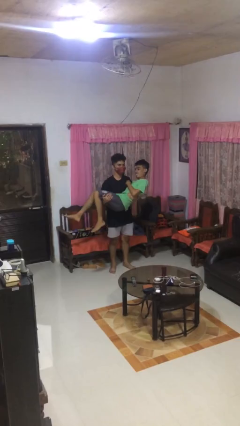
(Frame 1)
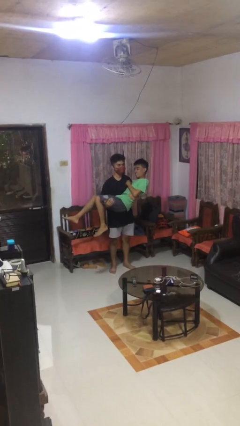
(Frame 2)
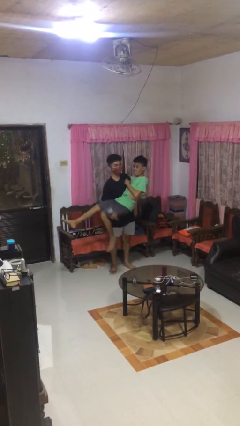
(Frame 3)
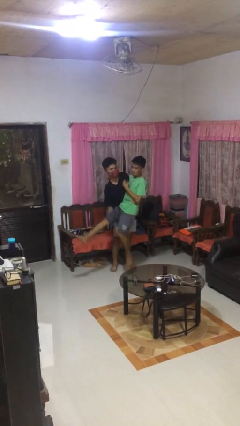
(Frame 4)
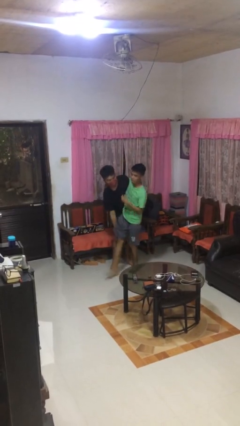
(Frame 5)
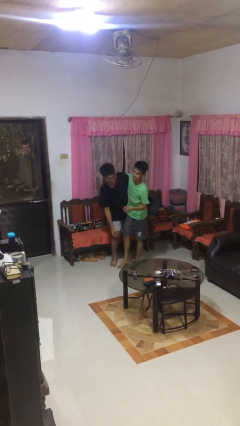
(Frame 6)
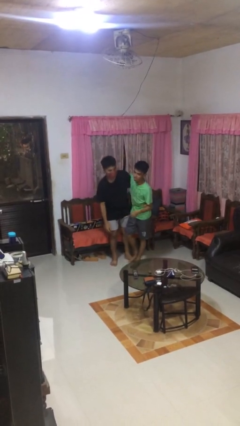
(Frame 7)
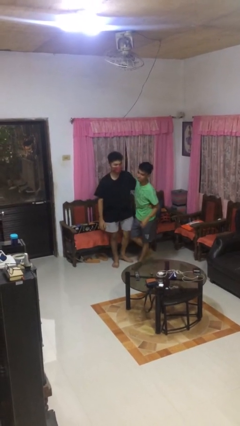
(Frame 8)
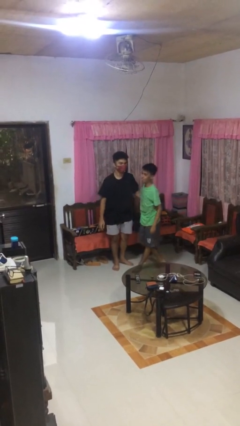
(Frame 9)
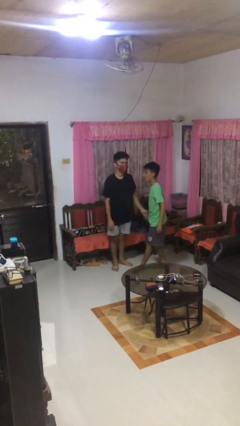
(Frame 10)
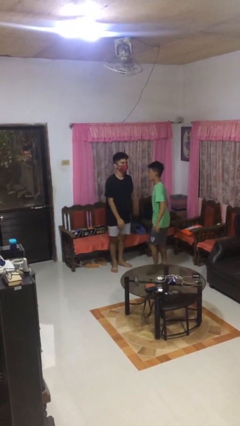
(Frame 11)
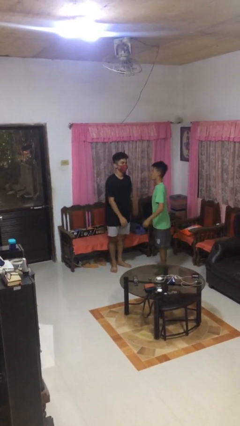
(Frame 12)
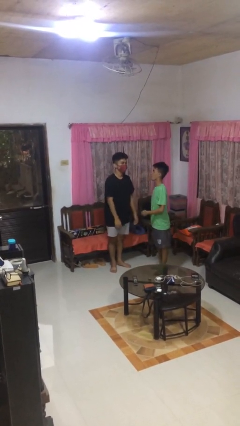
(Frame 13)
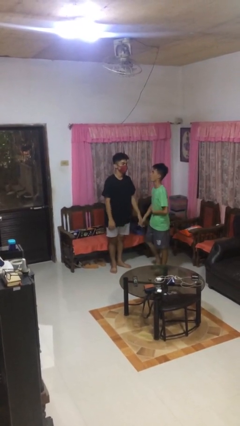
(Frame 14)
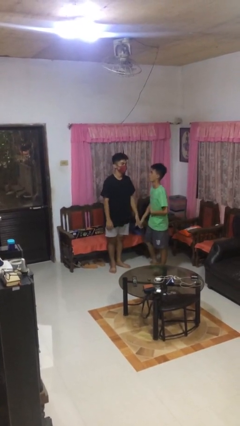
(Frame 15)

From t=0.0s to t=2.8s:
person puts down person

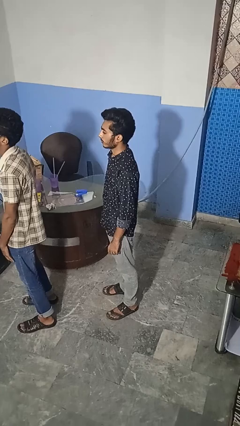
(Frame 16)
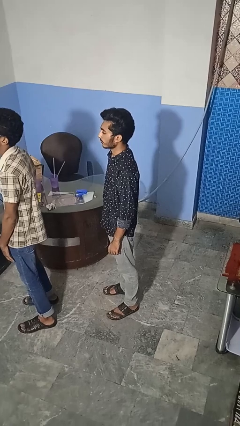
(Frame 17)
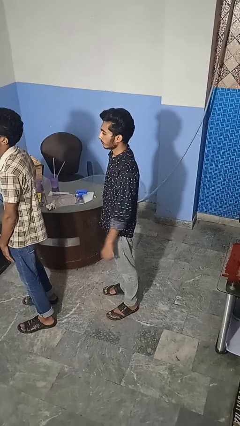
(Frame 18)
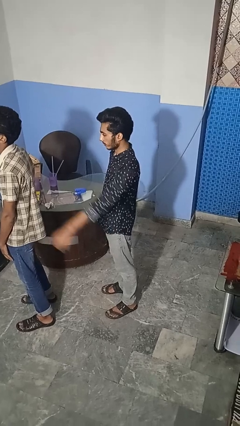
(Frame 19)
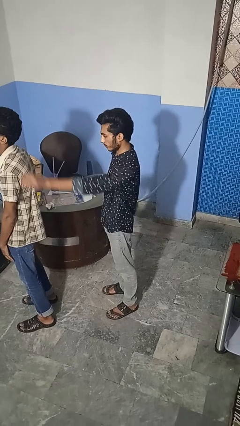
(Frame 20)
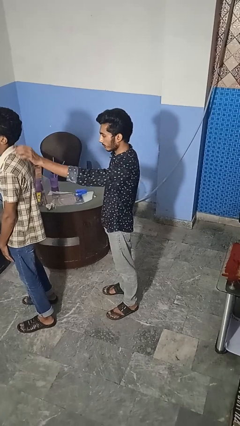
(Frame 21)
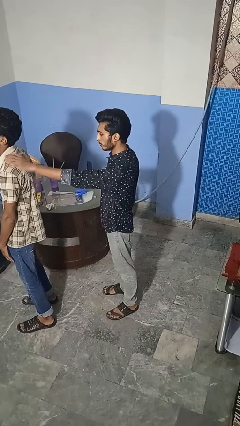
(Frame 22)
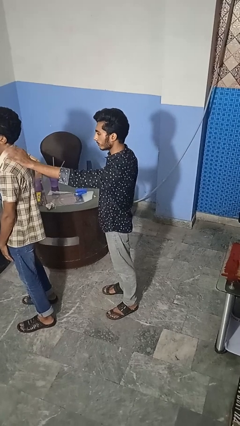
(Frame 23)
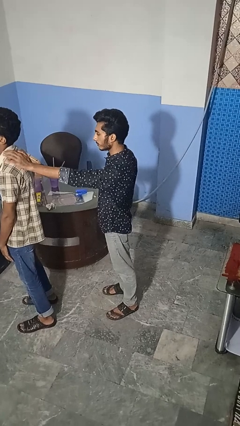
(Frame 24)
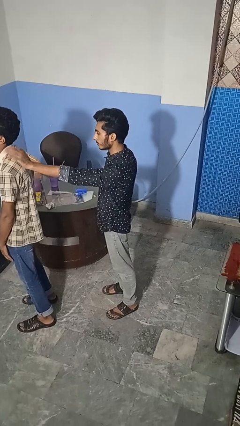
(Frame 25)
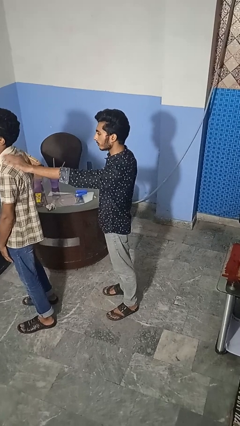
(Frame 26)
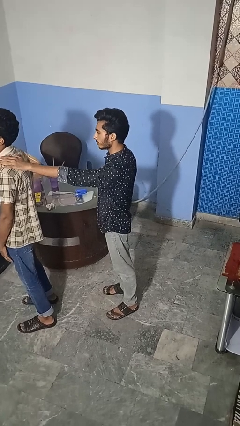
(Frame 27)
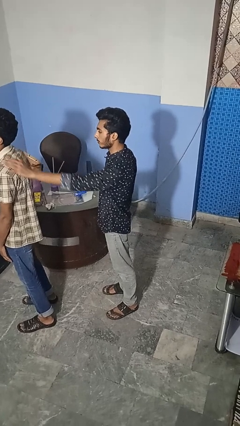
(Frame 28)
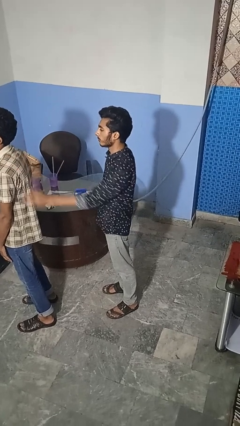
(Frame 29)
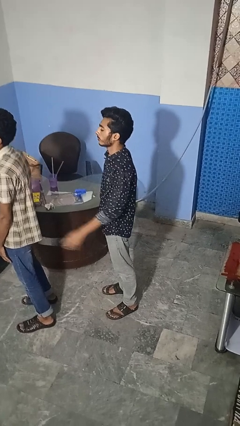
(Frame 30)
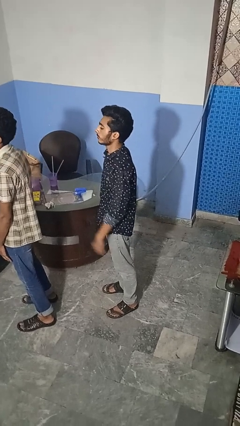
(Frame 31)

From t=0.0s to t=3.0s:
person touches back of person

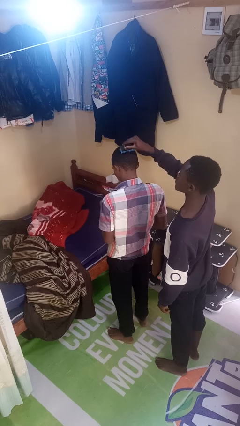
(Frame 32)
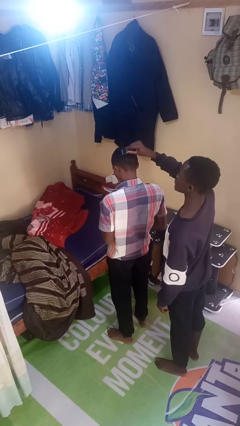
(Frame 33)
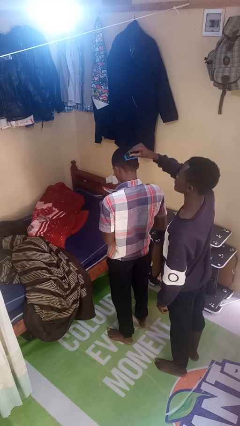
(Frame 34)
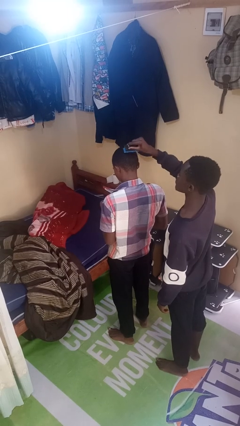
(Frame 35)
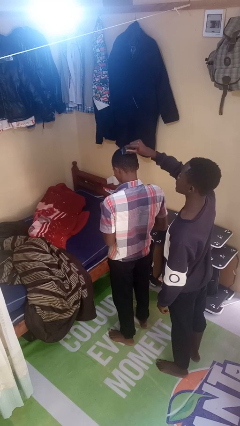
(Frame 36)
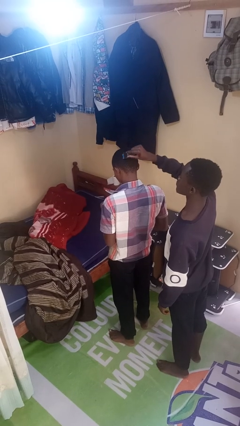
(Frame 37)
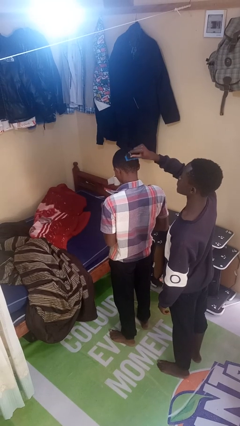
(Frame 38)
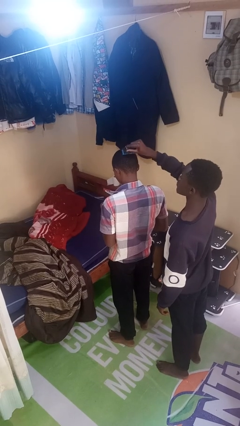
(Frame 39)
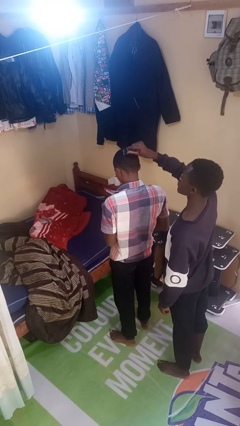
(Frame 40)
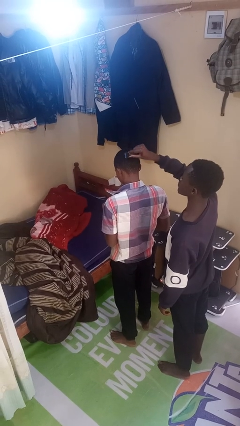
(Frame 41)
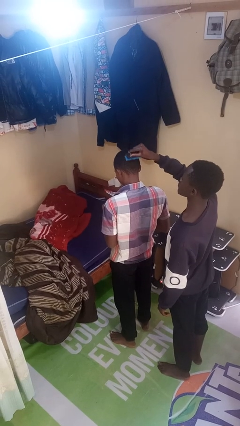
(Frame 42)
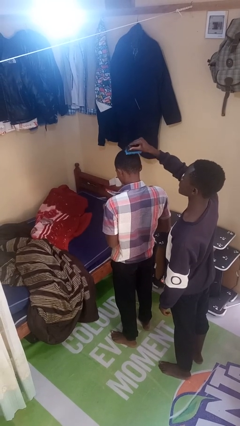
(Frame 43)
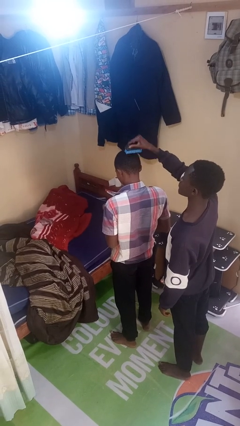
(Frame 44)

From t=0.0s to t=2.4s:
person brushes hair of person

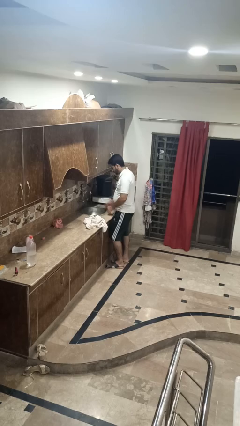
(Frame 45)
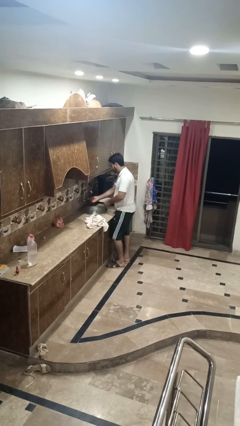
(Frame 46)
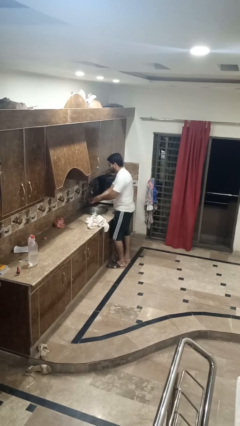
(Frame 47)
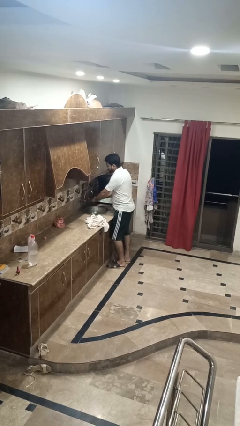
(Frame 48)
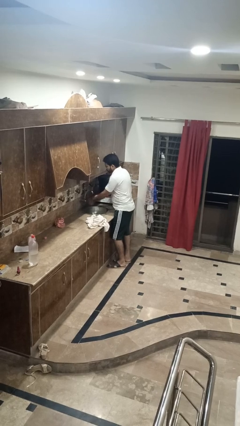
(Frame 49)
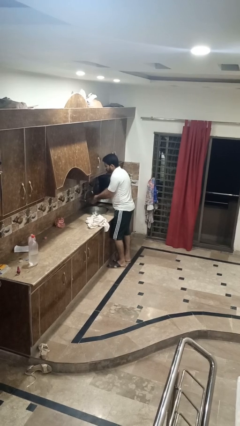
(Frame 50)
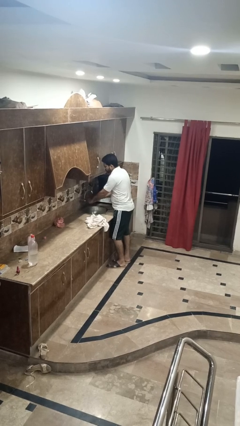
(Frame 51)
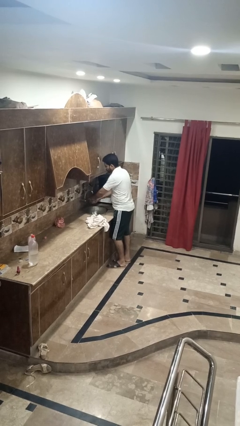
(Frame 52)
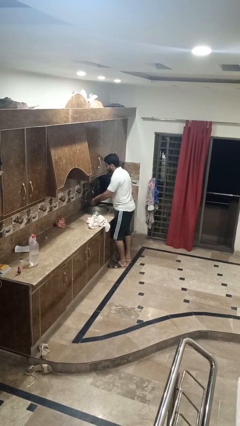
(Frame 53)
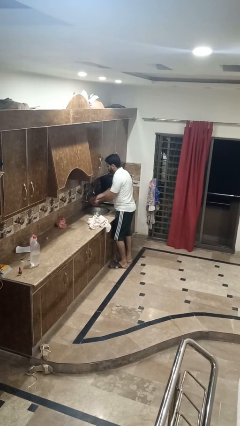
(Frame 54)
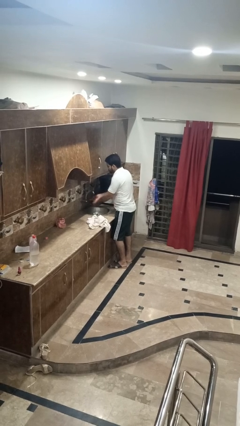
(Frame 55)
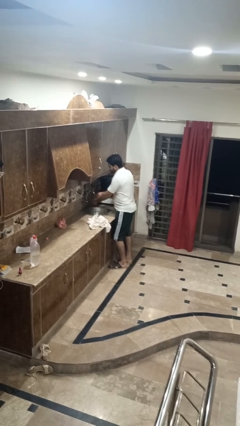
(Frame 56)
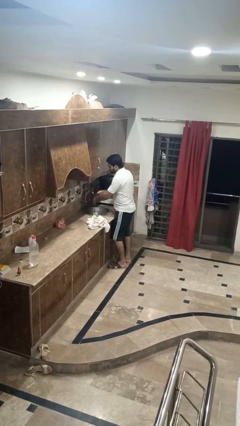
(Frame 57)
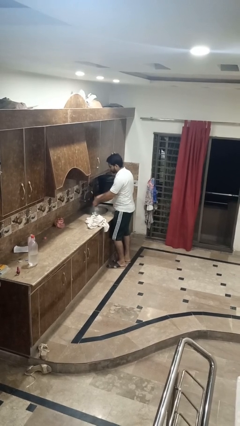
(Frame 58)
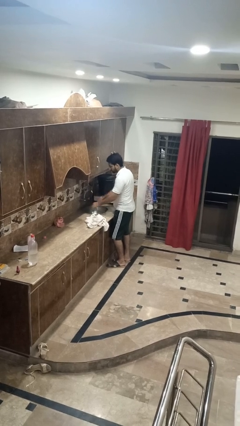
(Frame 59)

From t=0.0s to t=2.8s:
person washes hands

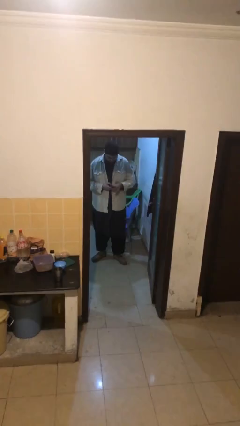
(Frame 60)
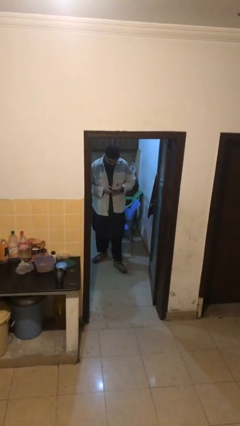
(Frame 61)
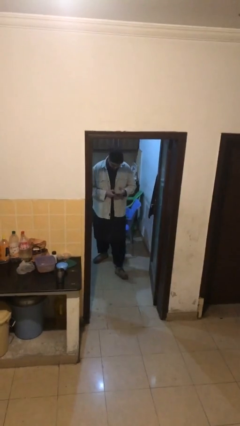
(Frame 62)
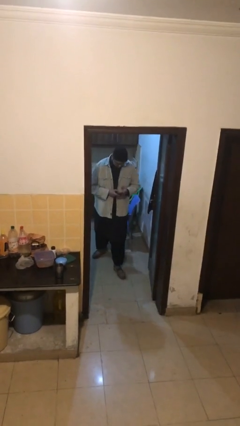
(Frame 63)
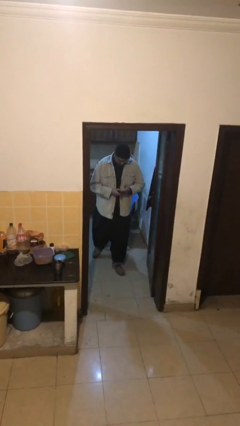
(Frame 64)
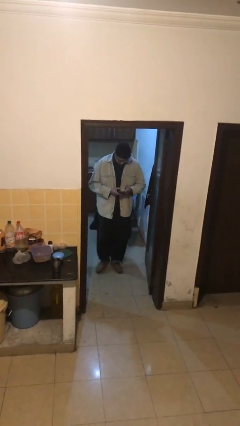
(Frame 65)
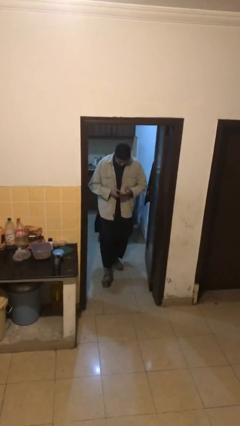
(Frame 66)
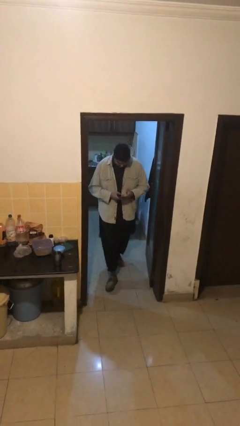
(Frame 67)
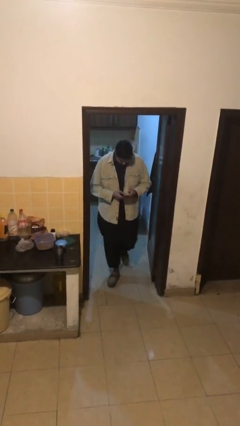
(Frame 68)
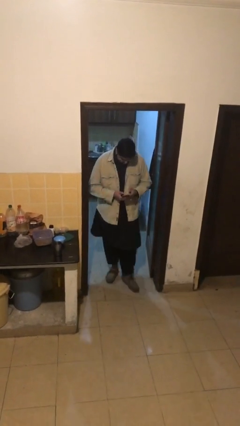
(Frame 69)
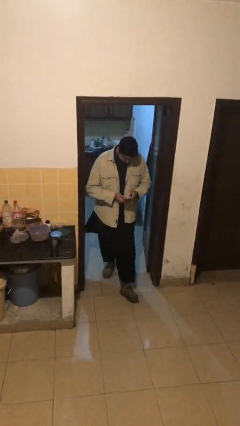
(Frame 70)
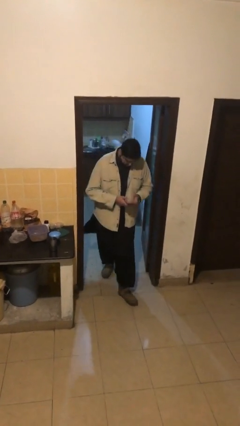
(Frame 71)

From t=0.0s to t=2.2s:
person enters scene through structure

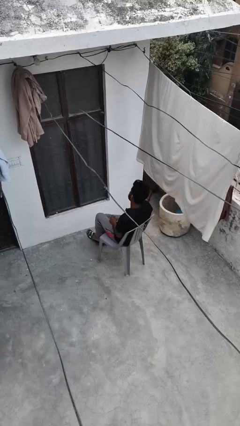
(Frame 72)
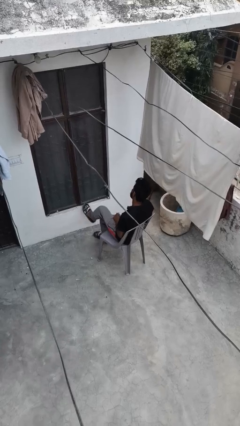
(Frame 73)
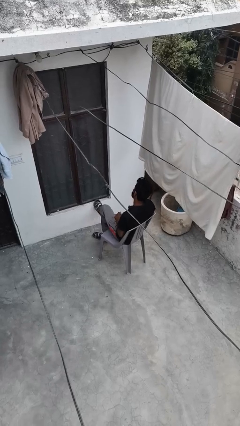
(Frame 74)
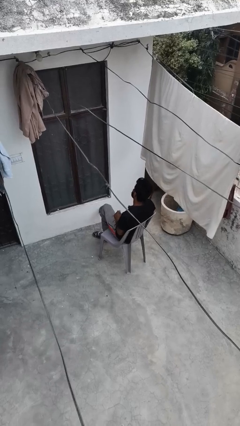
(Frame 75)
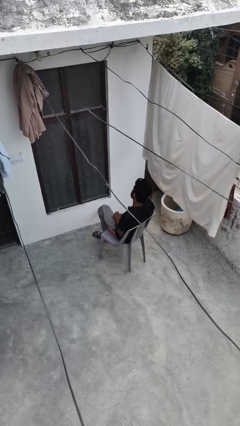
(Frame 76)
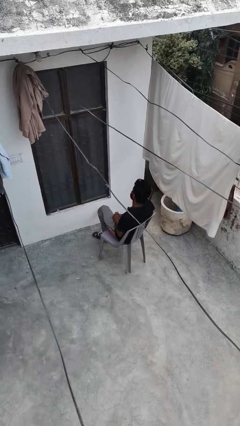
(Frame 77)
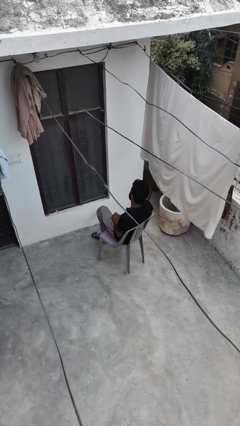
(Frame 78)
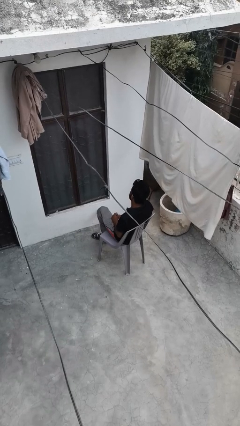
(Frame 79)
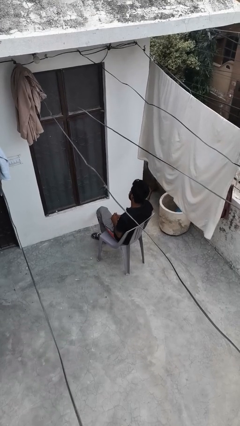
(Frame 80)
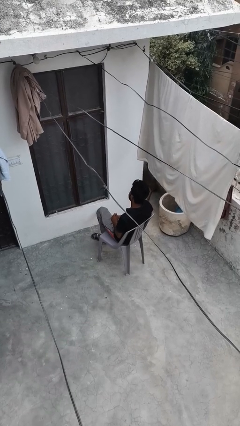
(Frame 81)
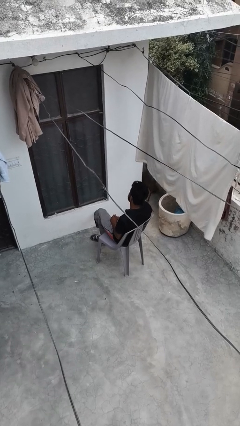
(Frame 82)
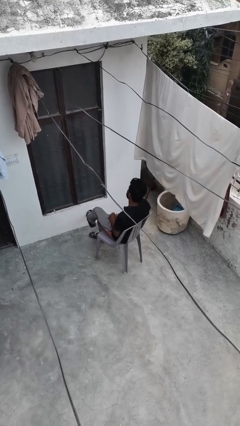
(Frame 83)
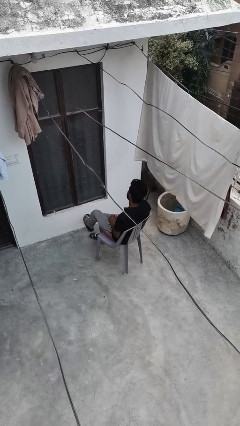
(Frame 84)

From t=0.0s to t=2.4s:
person crosses legs

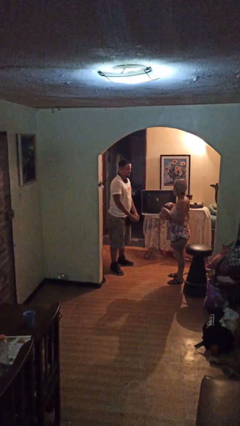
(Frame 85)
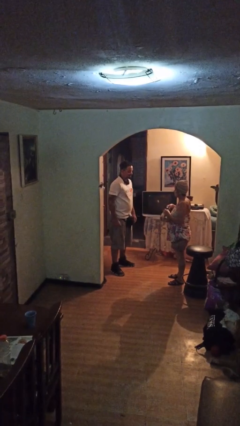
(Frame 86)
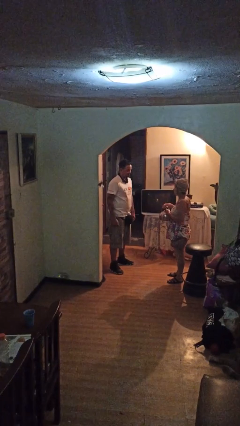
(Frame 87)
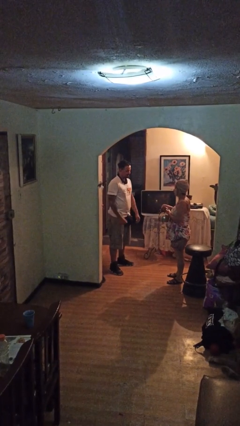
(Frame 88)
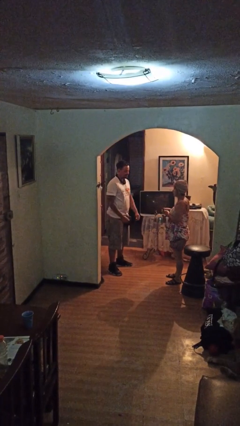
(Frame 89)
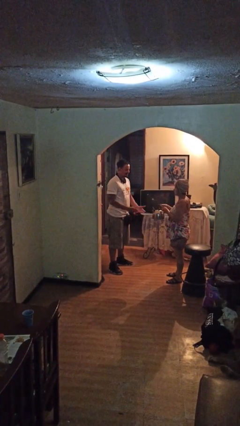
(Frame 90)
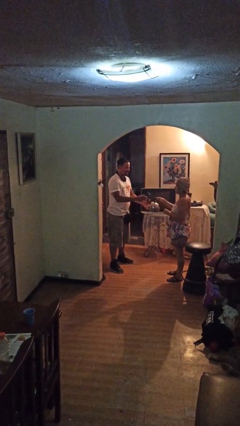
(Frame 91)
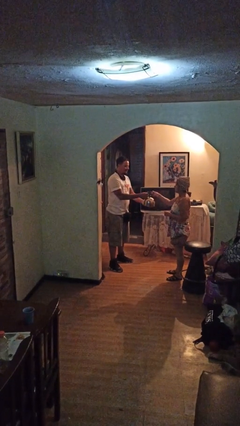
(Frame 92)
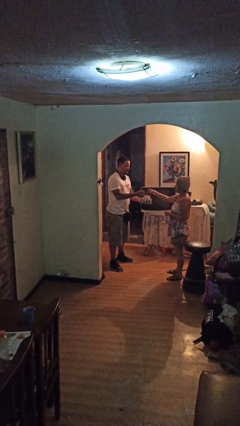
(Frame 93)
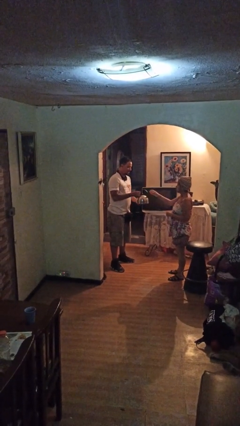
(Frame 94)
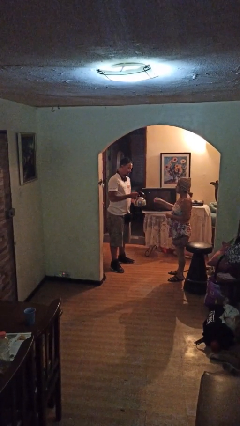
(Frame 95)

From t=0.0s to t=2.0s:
person transfers object to person
